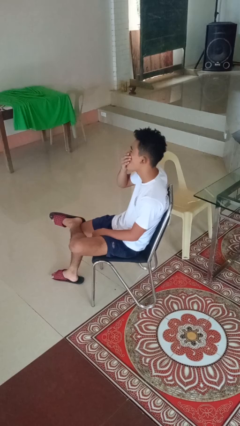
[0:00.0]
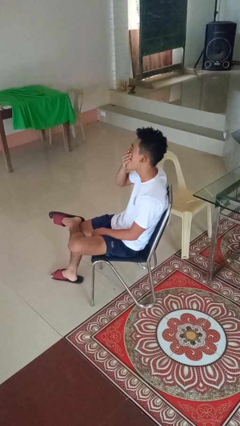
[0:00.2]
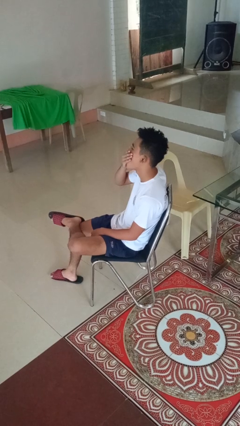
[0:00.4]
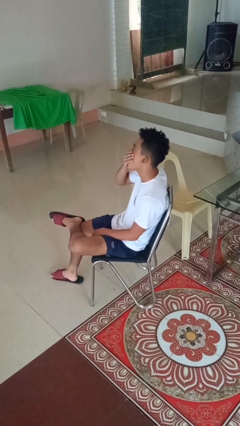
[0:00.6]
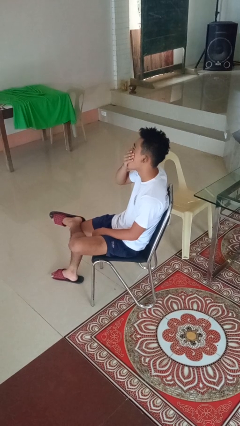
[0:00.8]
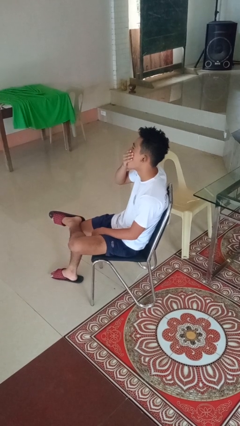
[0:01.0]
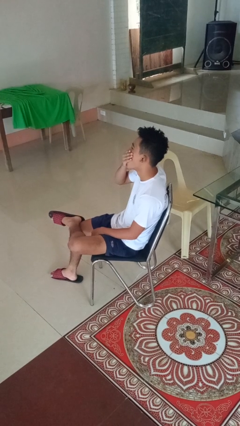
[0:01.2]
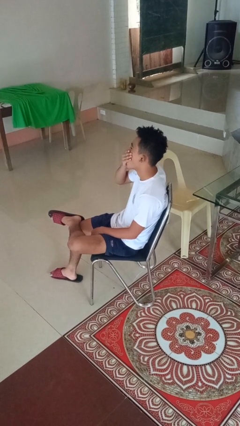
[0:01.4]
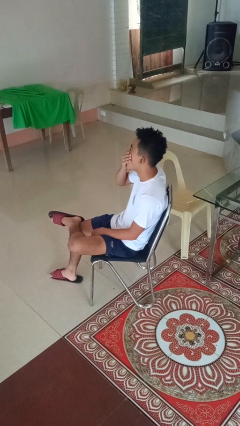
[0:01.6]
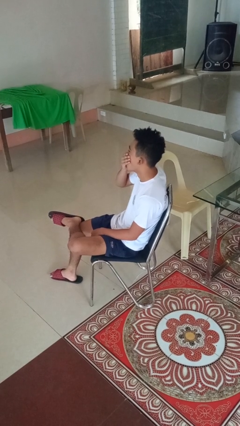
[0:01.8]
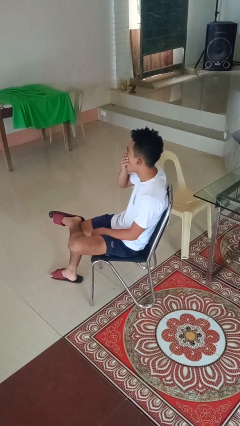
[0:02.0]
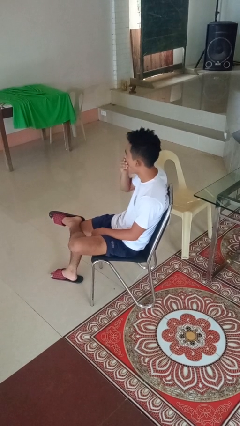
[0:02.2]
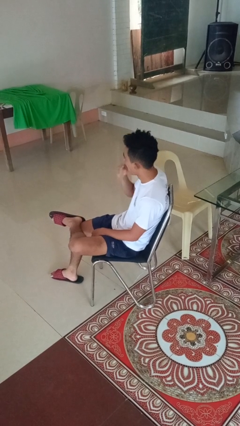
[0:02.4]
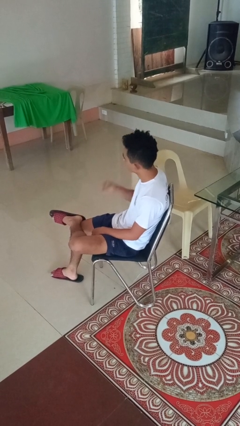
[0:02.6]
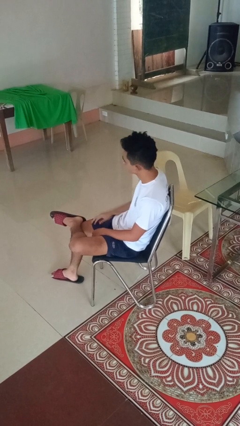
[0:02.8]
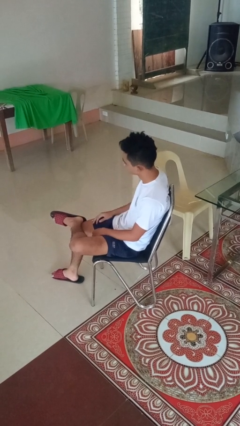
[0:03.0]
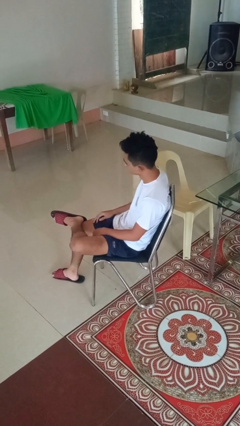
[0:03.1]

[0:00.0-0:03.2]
person yawns

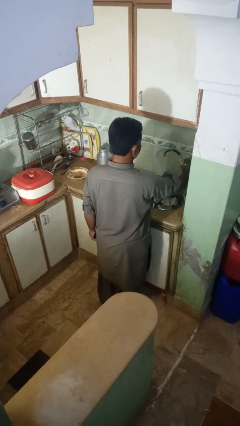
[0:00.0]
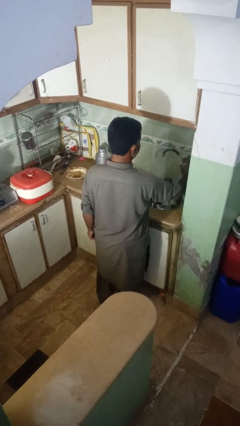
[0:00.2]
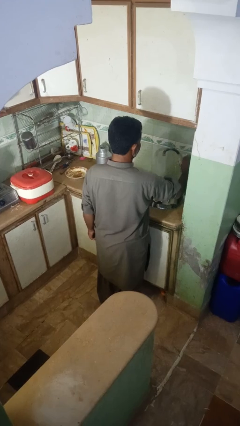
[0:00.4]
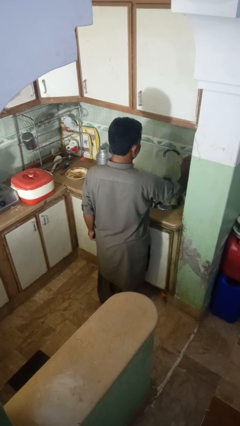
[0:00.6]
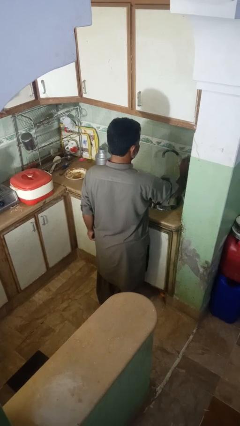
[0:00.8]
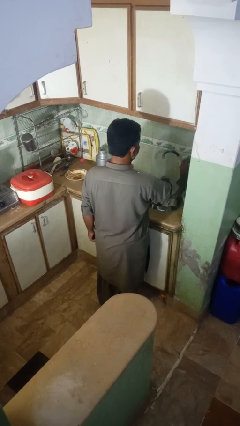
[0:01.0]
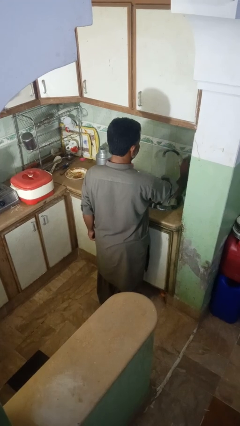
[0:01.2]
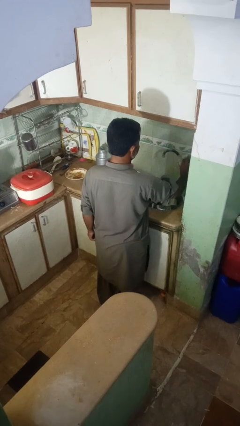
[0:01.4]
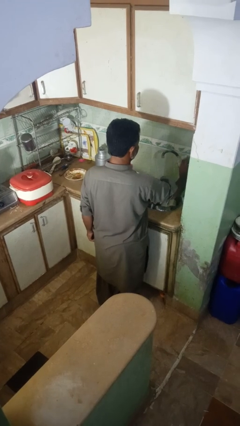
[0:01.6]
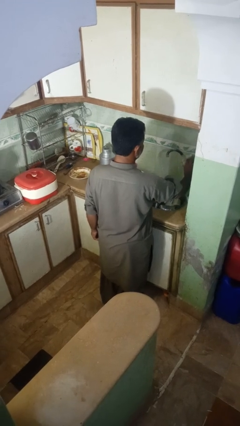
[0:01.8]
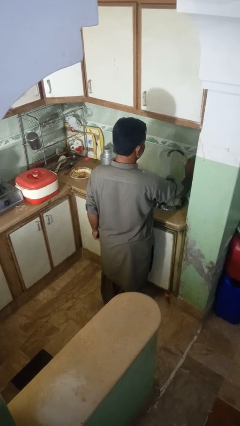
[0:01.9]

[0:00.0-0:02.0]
person turns on faucet

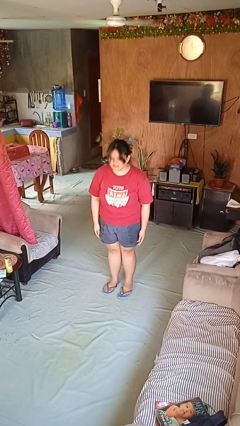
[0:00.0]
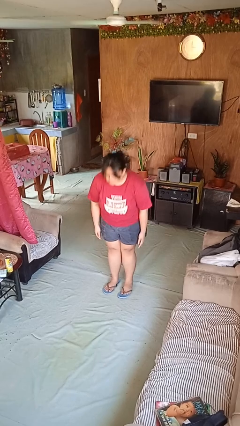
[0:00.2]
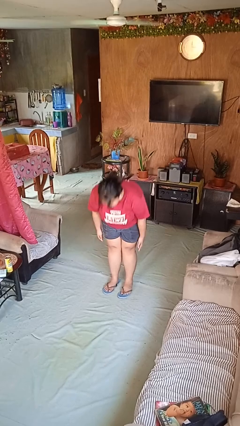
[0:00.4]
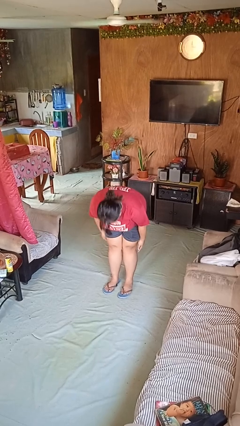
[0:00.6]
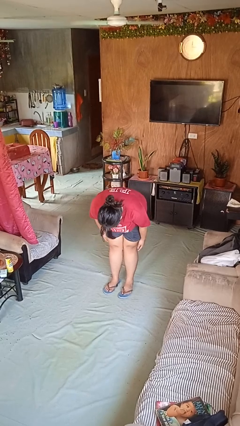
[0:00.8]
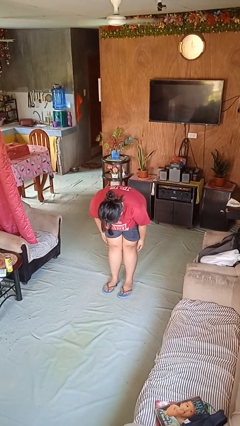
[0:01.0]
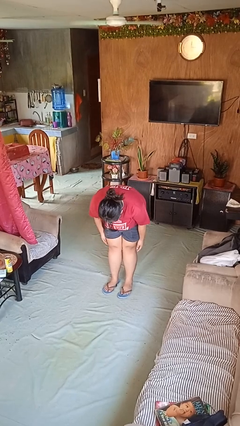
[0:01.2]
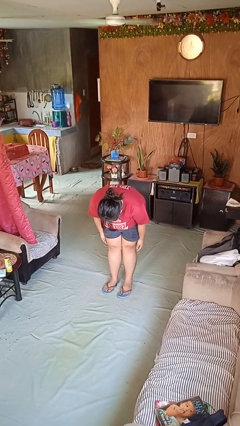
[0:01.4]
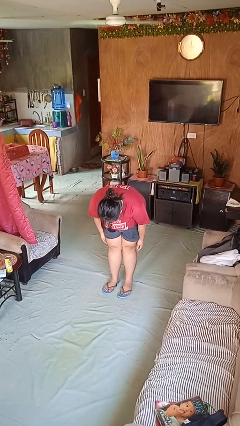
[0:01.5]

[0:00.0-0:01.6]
person bows

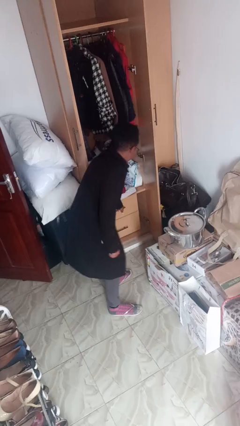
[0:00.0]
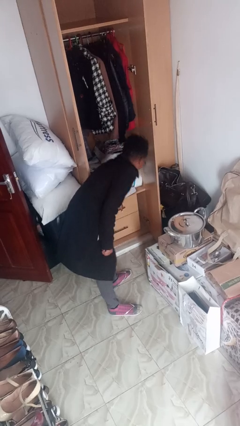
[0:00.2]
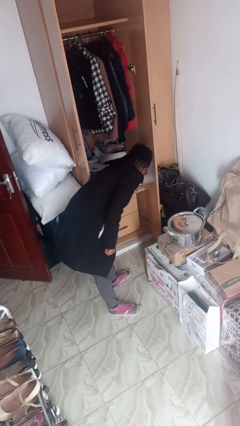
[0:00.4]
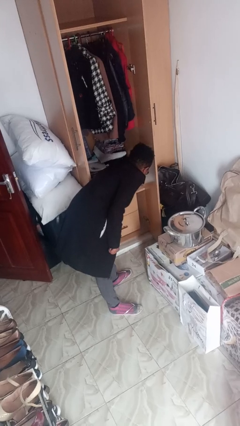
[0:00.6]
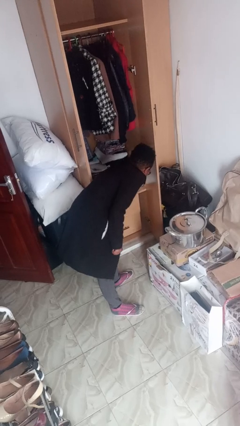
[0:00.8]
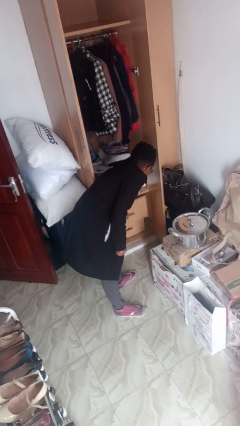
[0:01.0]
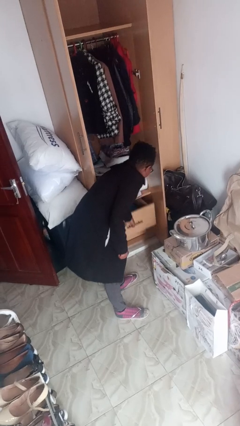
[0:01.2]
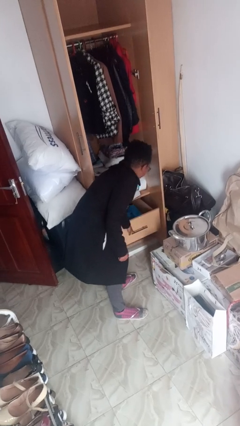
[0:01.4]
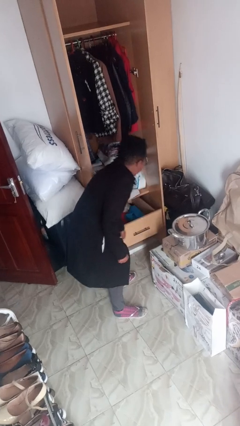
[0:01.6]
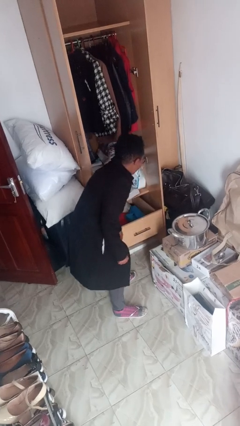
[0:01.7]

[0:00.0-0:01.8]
person opens dresser drawer

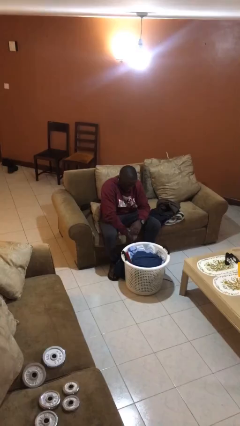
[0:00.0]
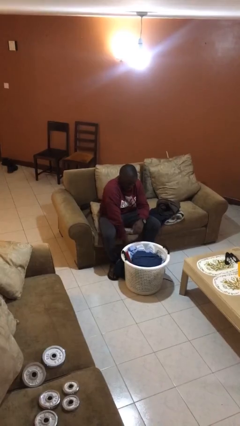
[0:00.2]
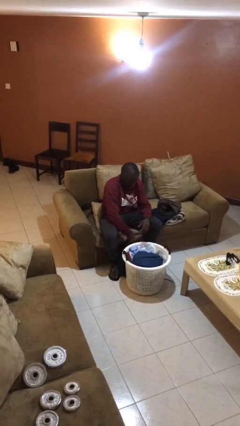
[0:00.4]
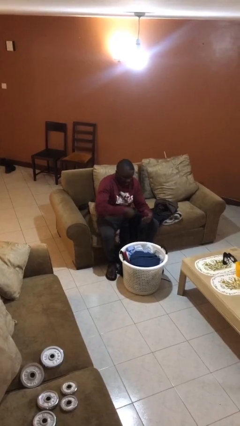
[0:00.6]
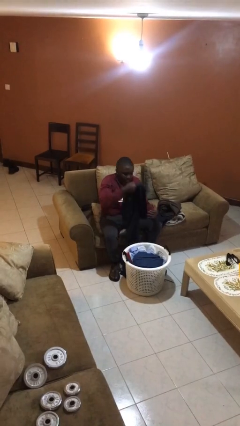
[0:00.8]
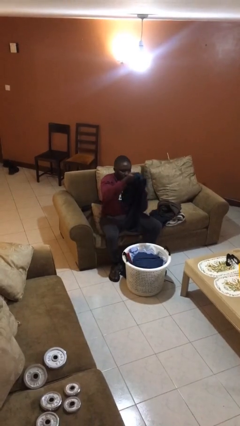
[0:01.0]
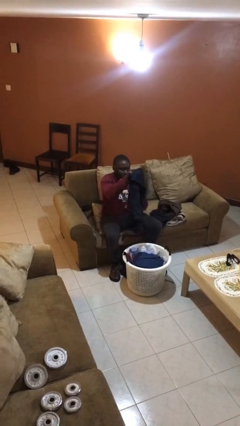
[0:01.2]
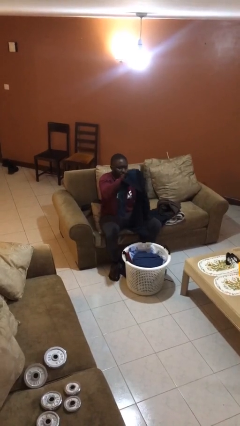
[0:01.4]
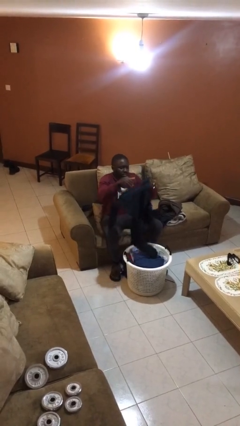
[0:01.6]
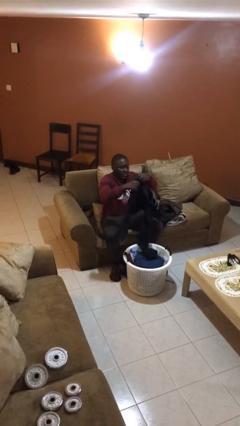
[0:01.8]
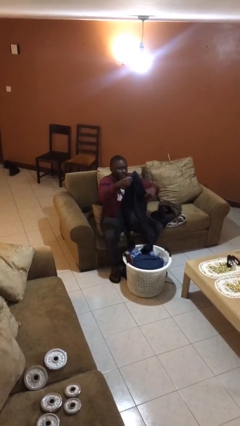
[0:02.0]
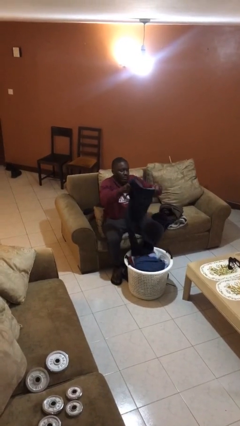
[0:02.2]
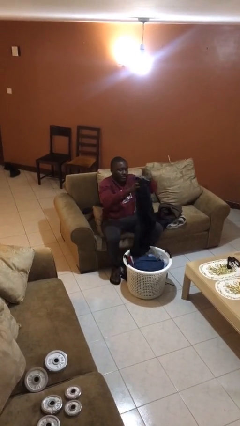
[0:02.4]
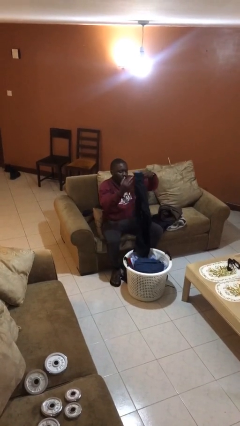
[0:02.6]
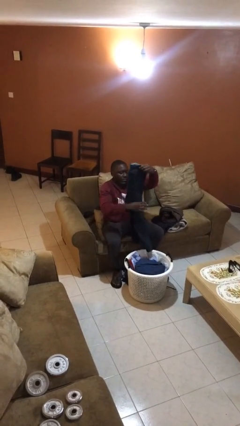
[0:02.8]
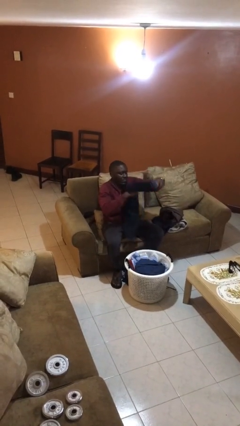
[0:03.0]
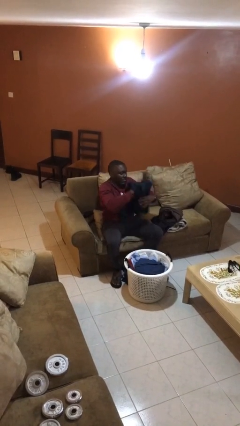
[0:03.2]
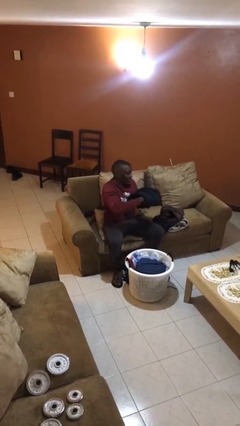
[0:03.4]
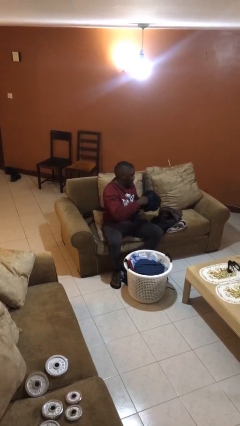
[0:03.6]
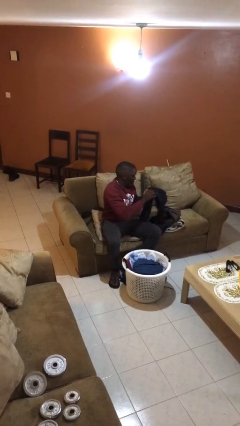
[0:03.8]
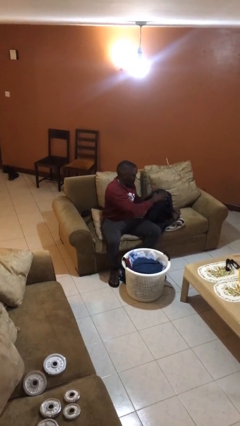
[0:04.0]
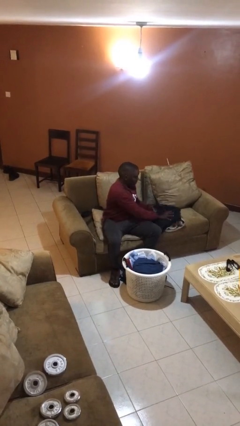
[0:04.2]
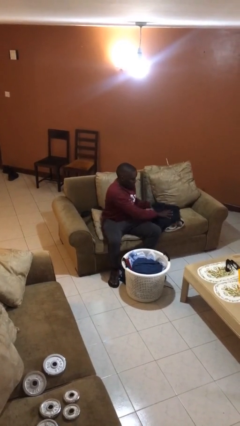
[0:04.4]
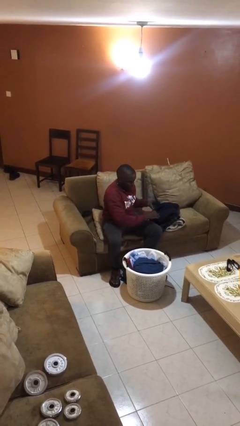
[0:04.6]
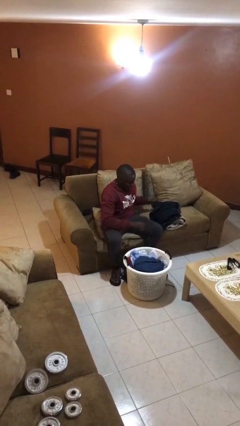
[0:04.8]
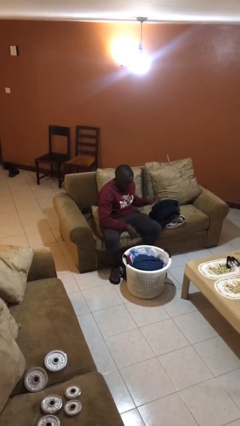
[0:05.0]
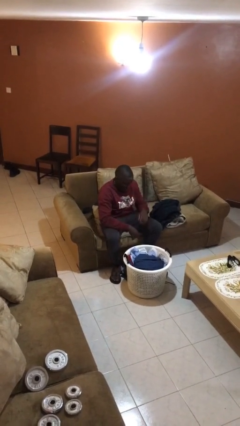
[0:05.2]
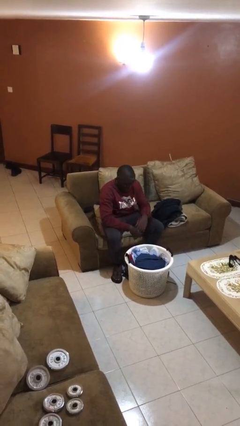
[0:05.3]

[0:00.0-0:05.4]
person folds pants

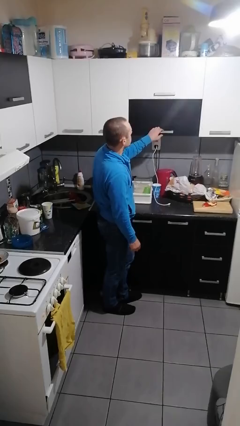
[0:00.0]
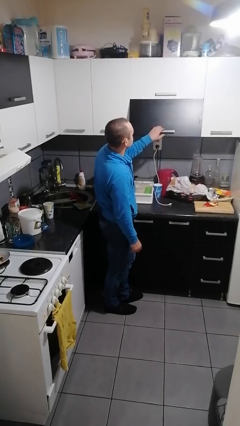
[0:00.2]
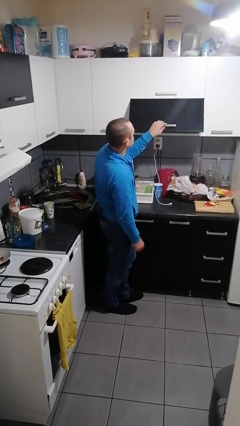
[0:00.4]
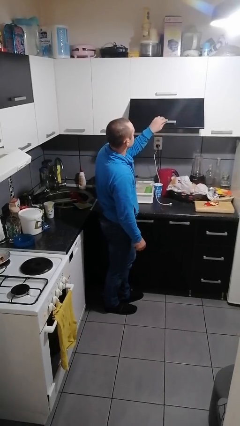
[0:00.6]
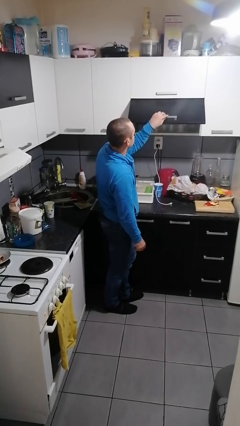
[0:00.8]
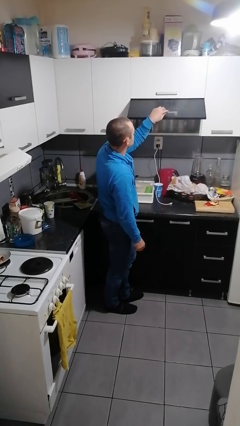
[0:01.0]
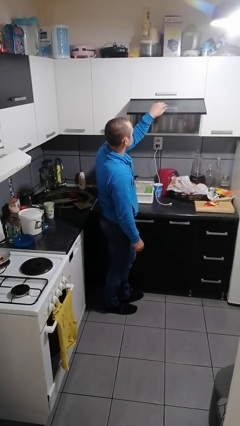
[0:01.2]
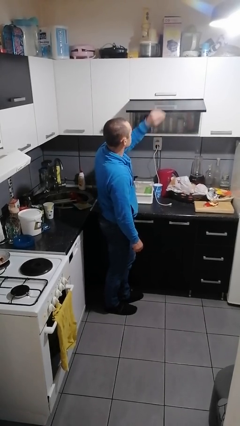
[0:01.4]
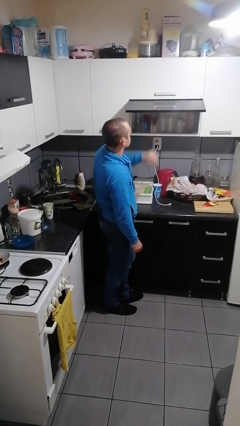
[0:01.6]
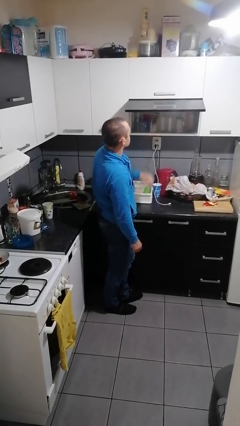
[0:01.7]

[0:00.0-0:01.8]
person opens cabinet

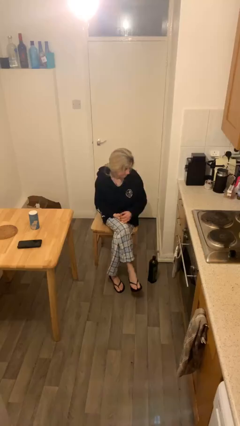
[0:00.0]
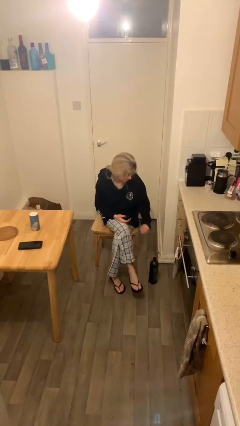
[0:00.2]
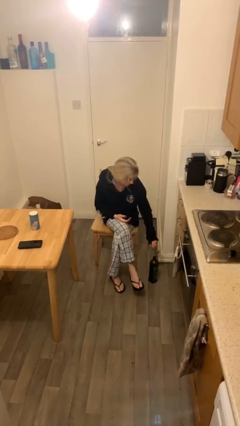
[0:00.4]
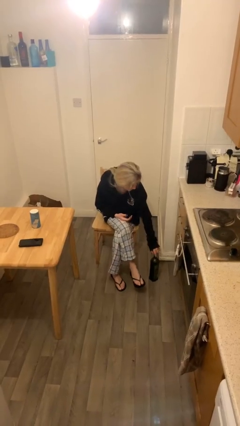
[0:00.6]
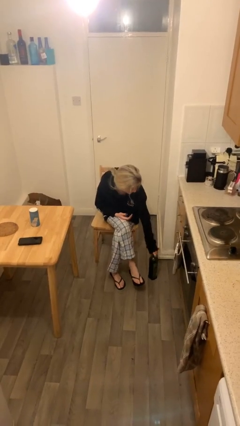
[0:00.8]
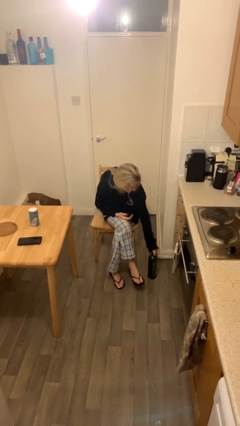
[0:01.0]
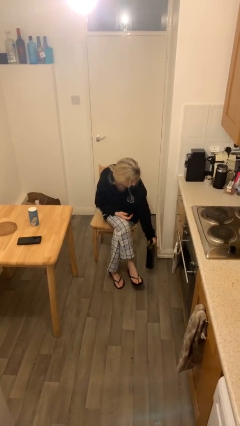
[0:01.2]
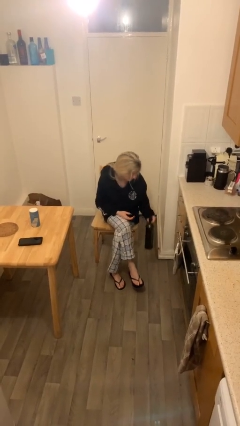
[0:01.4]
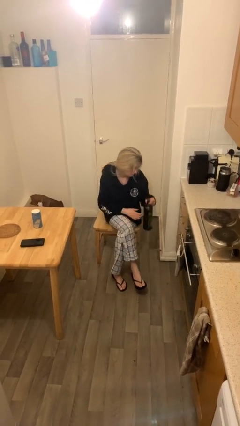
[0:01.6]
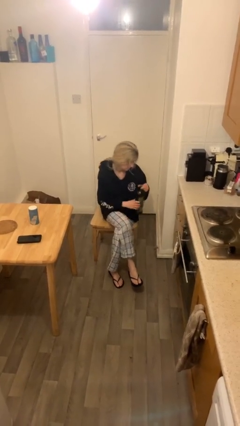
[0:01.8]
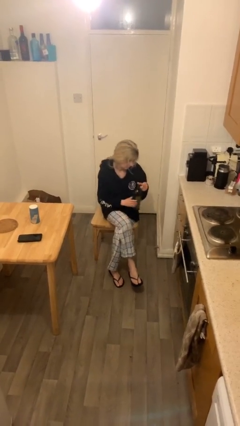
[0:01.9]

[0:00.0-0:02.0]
person picks up object from floor
